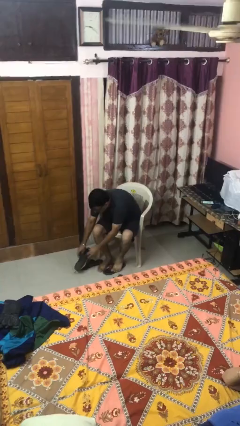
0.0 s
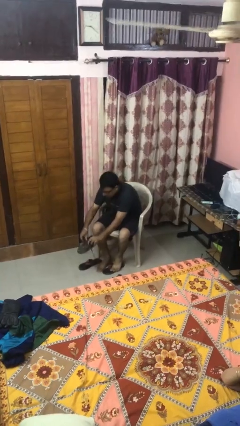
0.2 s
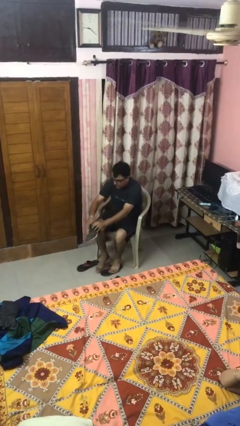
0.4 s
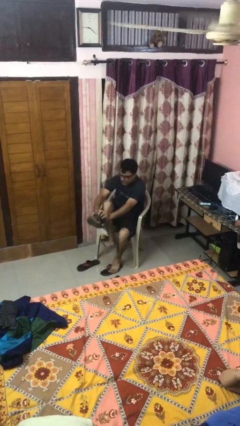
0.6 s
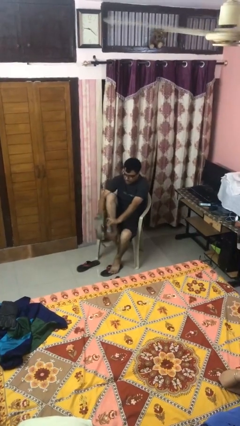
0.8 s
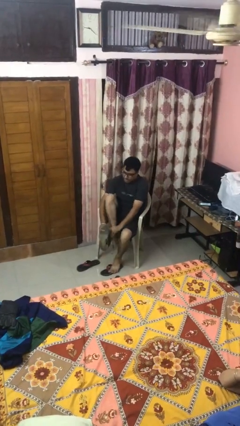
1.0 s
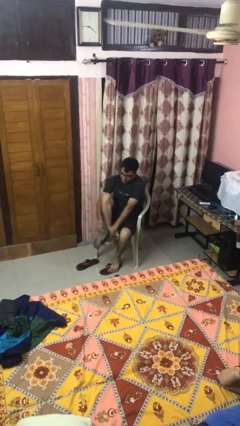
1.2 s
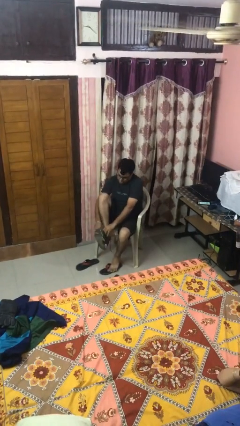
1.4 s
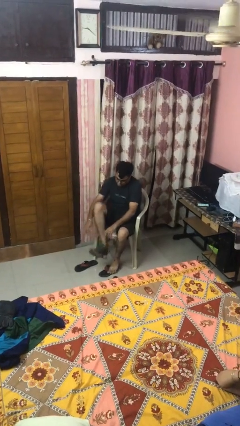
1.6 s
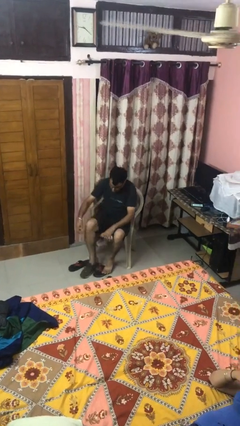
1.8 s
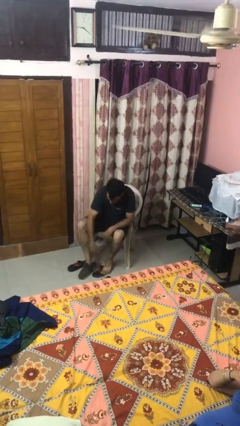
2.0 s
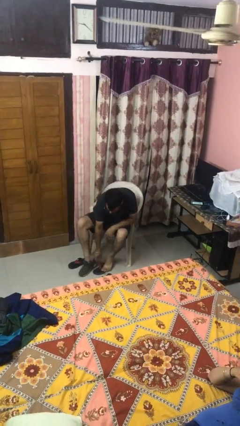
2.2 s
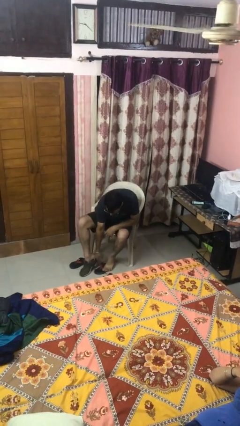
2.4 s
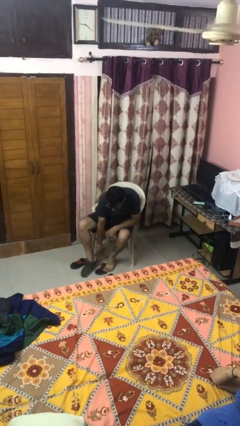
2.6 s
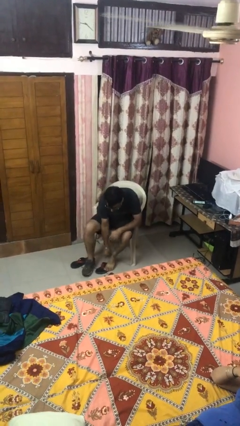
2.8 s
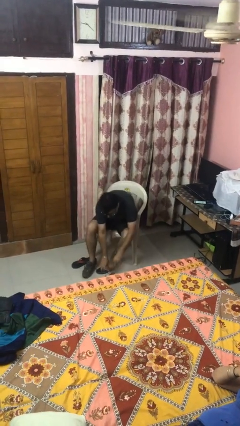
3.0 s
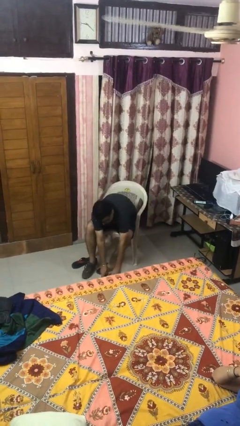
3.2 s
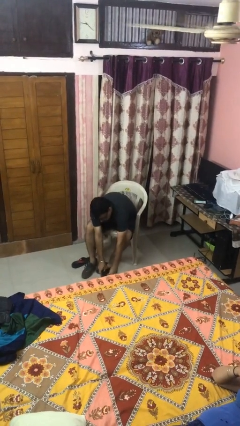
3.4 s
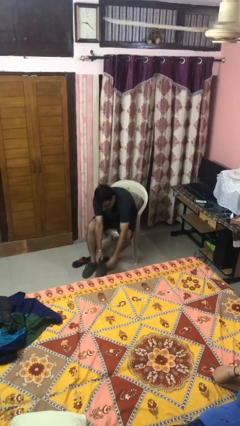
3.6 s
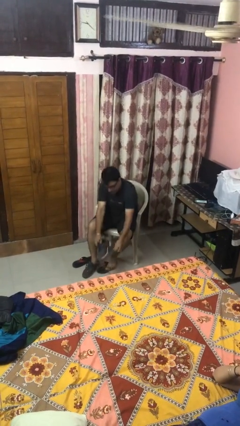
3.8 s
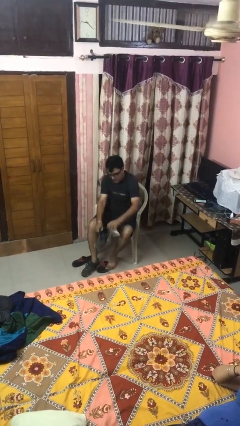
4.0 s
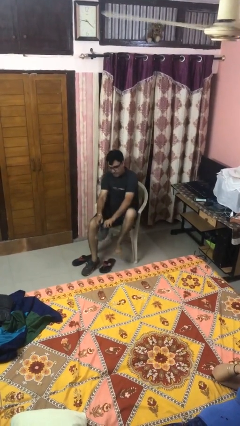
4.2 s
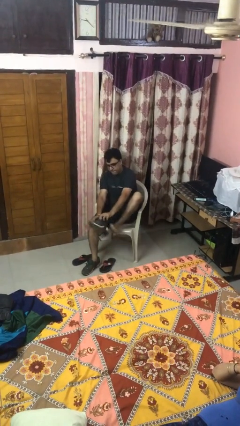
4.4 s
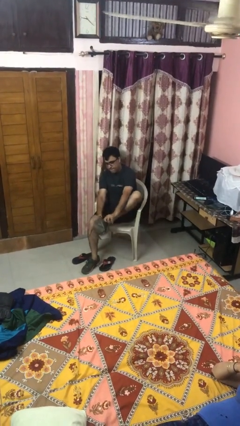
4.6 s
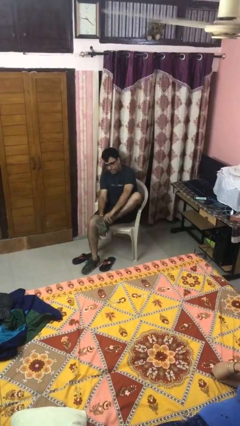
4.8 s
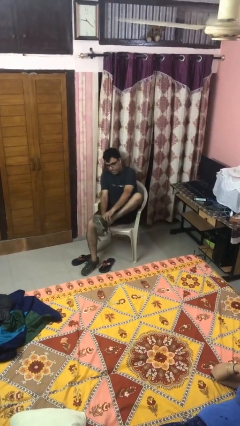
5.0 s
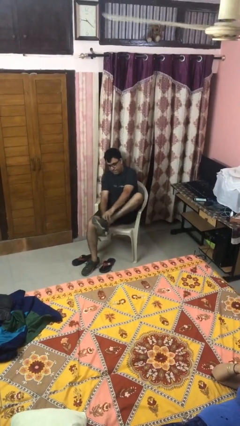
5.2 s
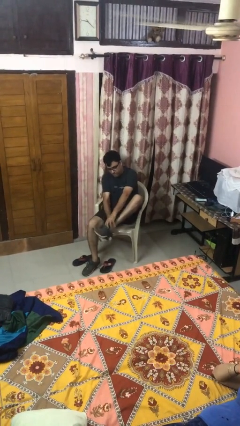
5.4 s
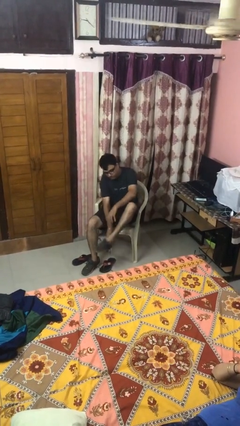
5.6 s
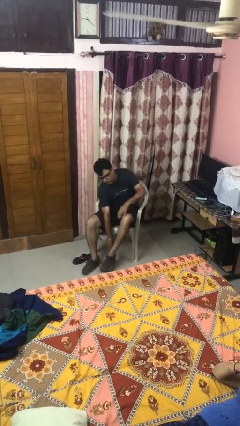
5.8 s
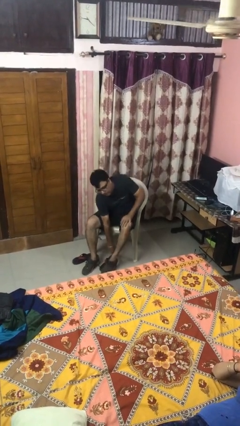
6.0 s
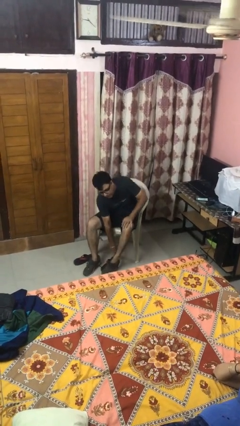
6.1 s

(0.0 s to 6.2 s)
person puts on shoes

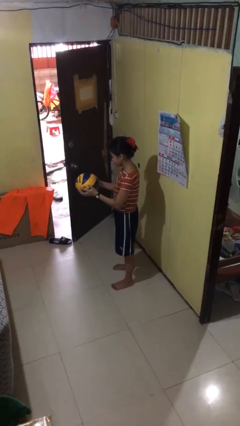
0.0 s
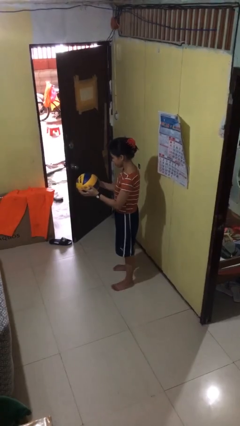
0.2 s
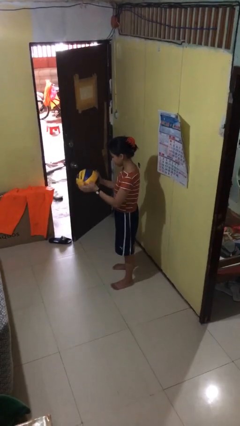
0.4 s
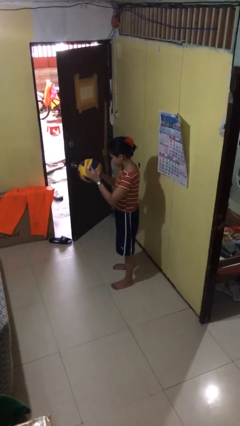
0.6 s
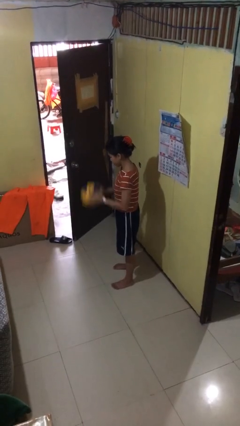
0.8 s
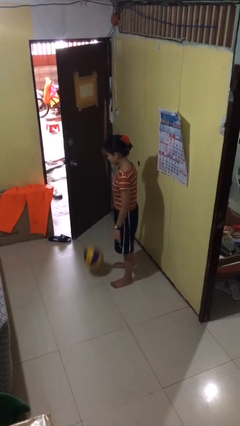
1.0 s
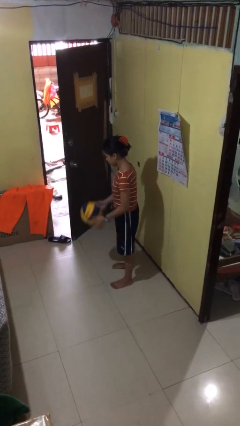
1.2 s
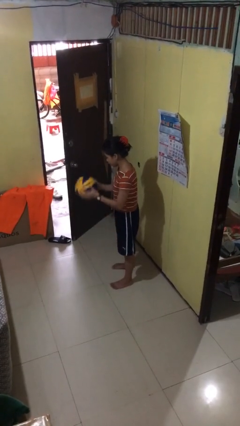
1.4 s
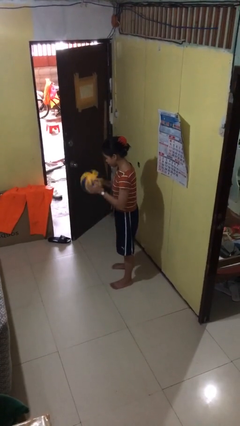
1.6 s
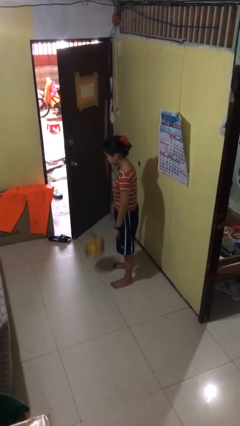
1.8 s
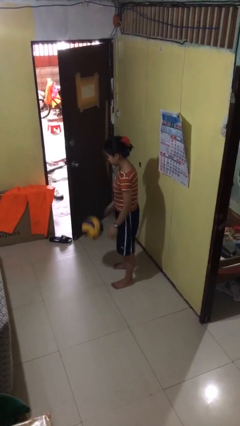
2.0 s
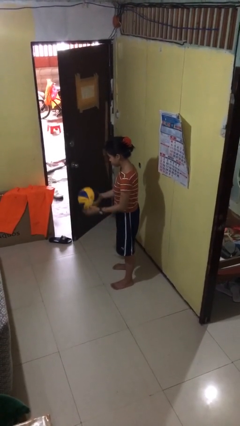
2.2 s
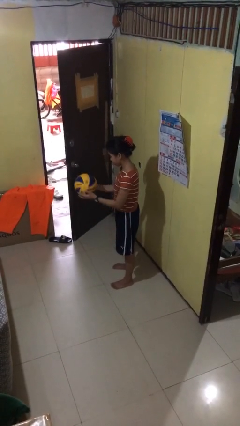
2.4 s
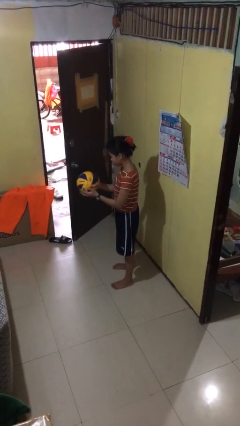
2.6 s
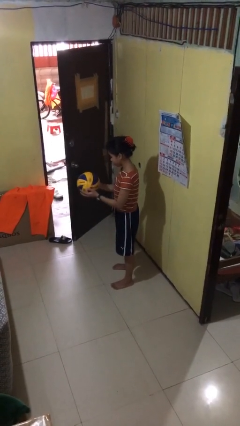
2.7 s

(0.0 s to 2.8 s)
person bounces ball on floor

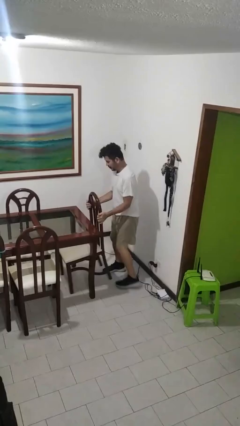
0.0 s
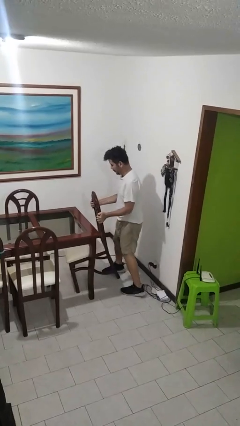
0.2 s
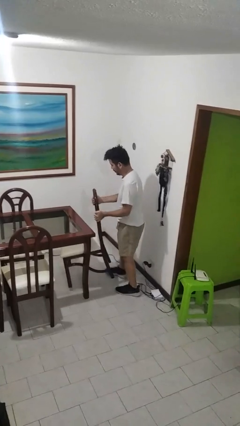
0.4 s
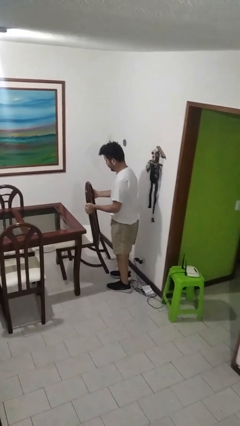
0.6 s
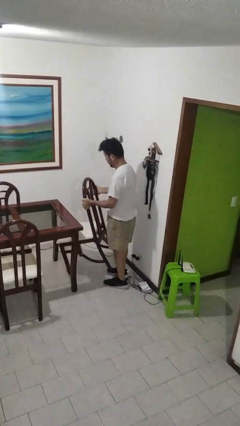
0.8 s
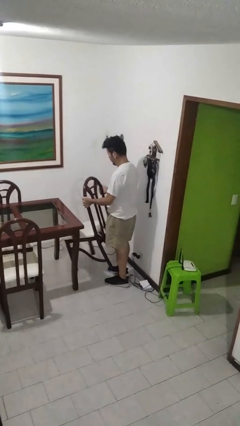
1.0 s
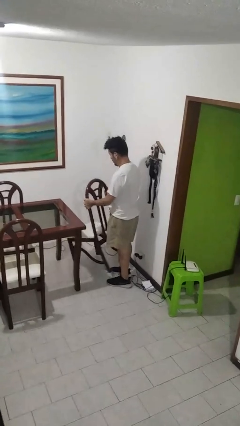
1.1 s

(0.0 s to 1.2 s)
person pulls out chair

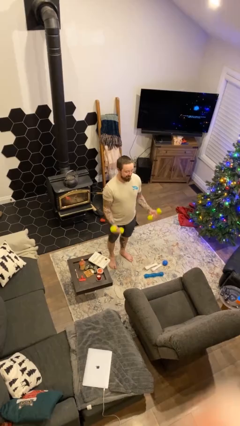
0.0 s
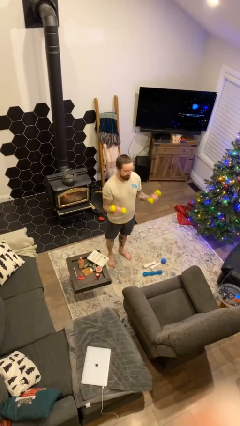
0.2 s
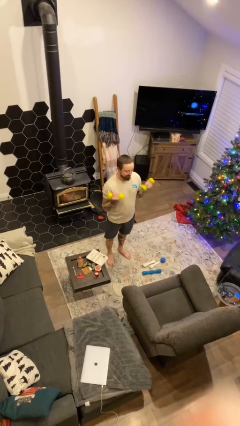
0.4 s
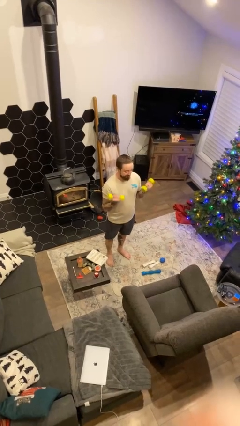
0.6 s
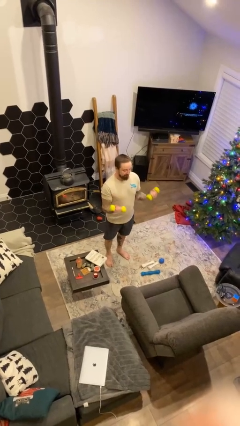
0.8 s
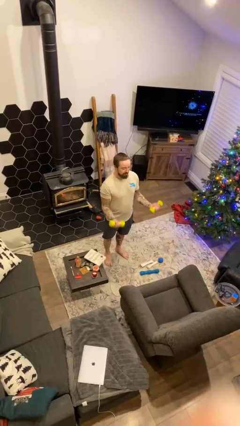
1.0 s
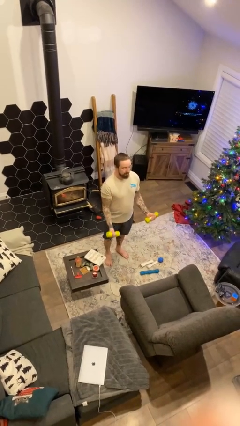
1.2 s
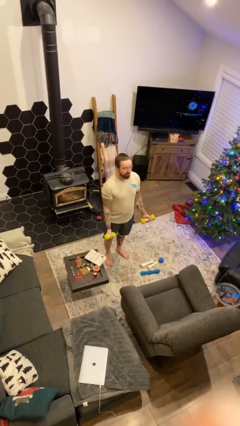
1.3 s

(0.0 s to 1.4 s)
person lifts dumbbells

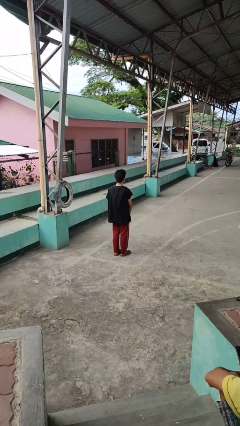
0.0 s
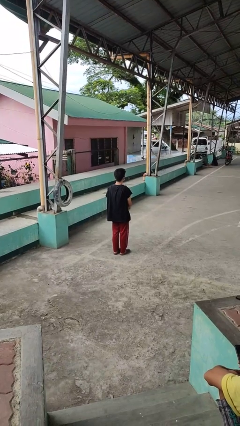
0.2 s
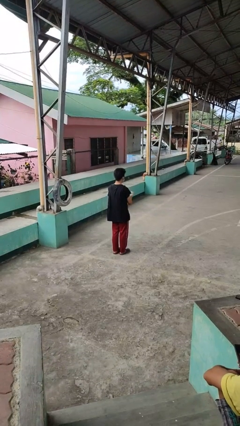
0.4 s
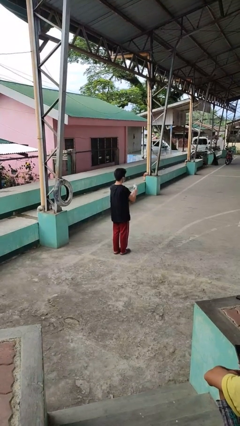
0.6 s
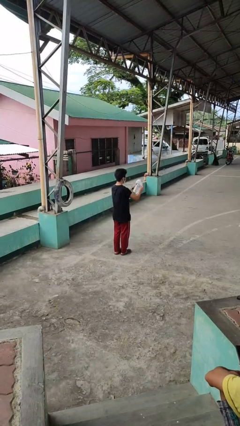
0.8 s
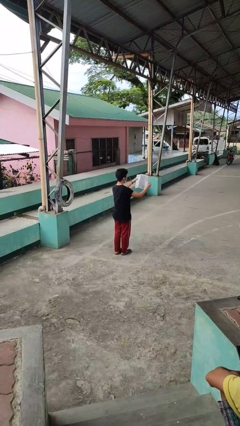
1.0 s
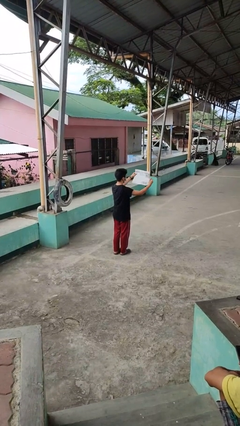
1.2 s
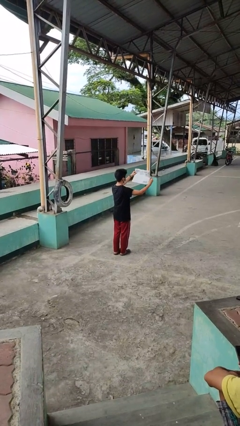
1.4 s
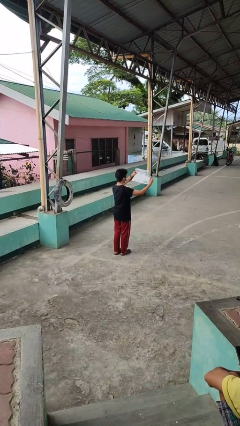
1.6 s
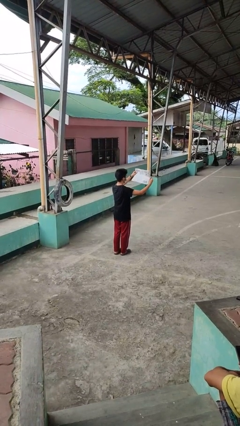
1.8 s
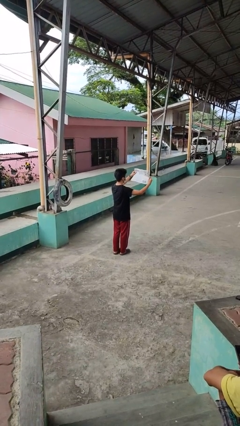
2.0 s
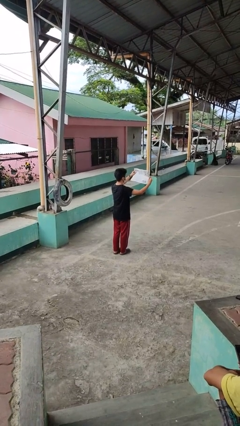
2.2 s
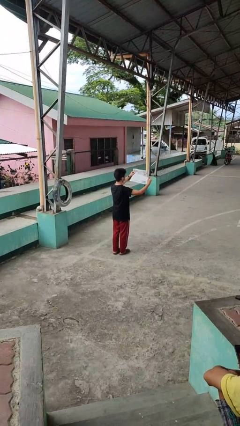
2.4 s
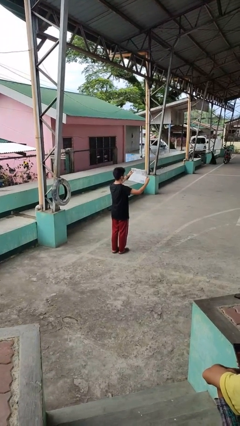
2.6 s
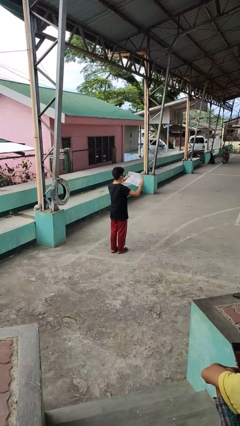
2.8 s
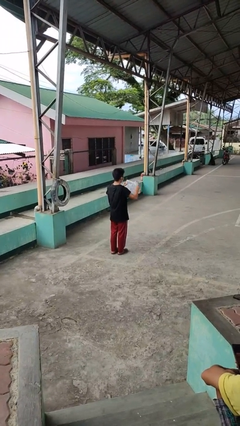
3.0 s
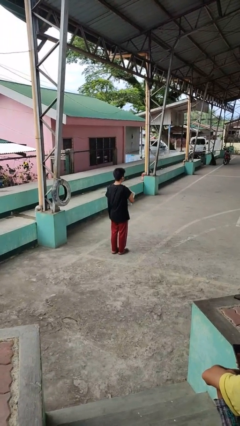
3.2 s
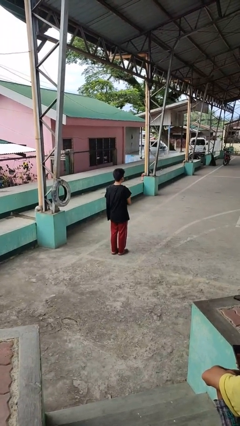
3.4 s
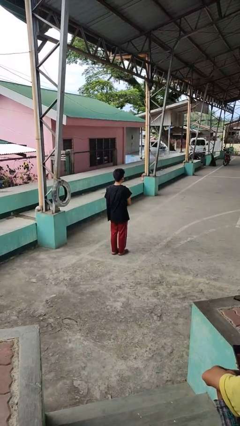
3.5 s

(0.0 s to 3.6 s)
person reads newspaper

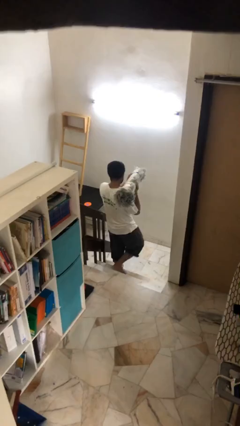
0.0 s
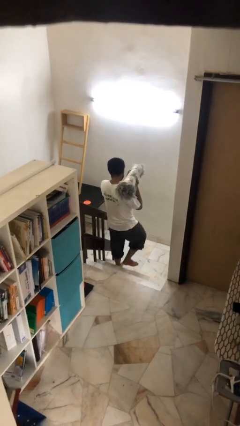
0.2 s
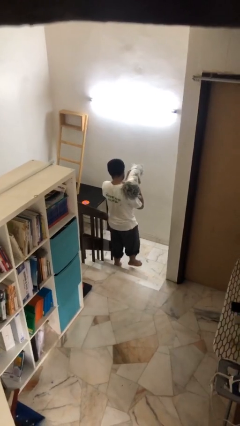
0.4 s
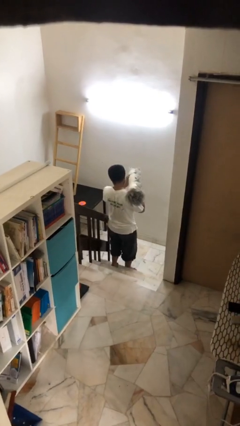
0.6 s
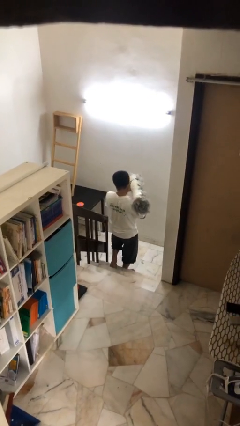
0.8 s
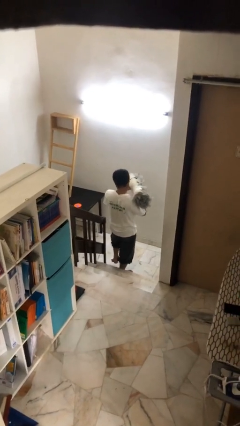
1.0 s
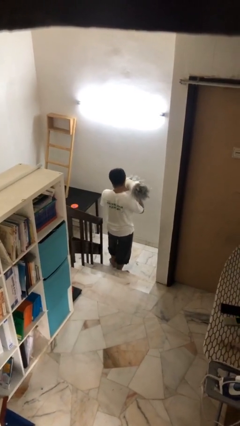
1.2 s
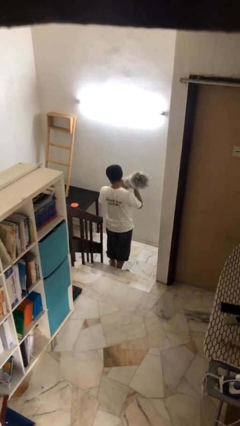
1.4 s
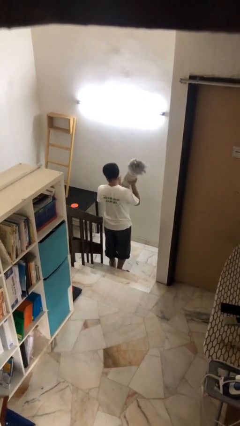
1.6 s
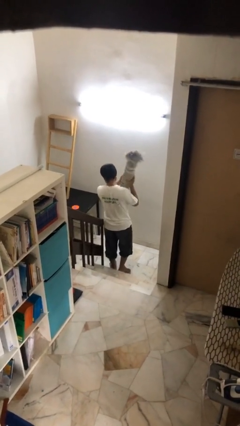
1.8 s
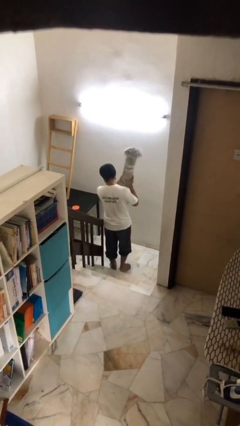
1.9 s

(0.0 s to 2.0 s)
person carries heavy object

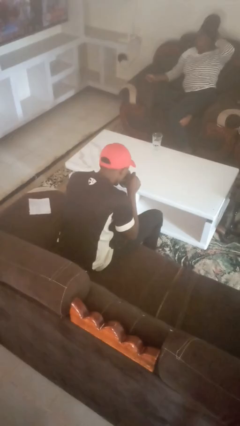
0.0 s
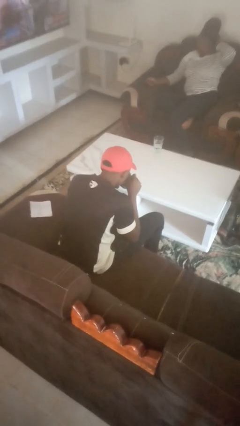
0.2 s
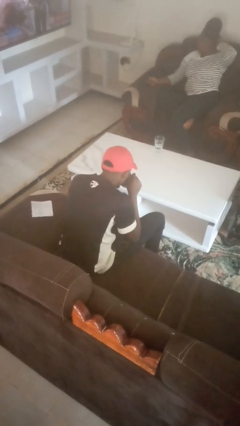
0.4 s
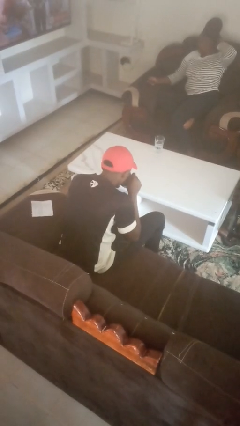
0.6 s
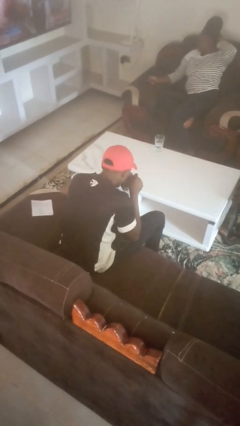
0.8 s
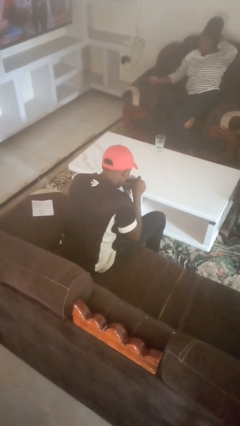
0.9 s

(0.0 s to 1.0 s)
person drinks from mug
